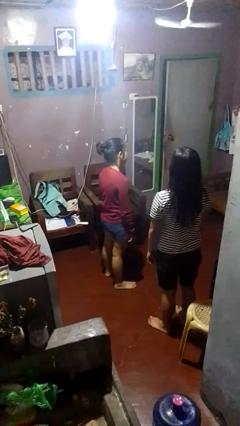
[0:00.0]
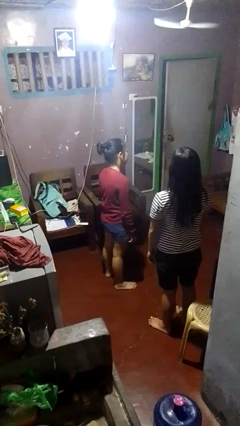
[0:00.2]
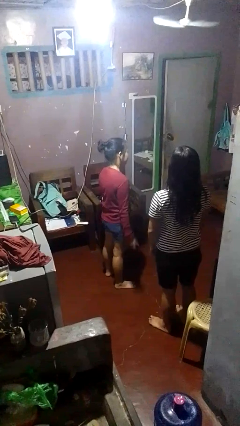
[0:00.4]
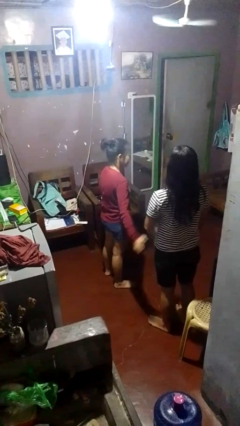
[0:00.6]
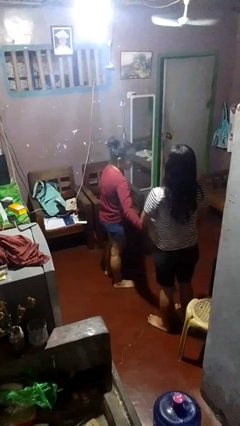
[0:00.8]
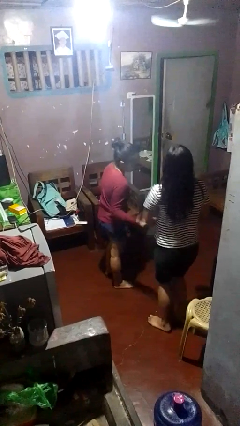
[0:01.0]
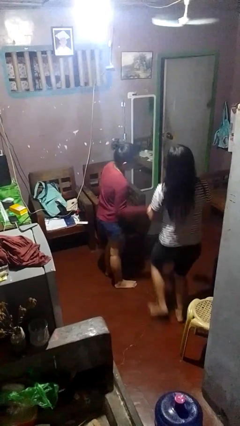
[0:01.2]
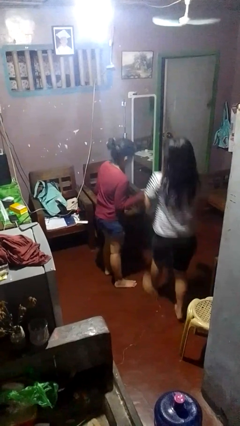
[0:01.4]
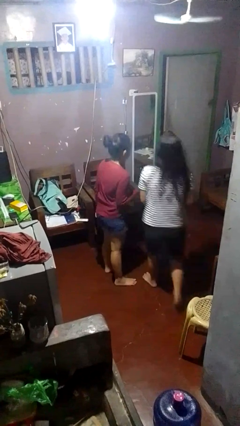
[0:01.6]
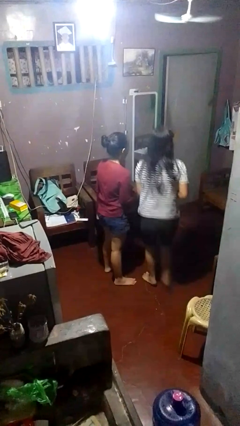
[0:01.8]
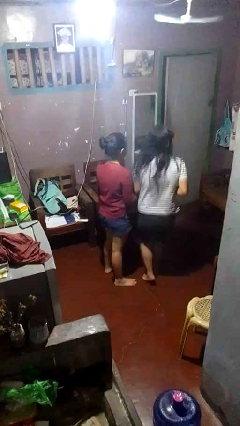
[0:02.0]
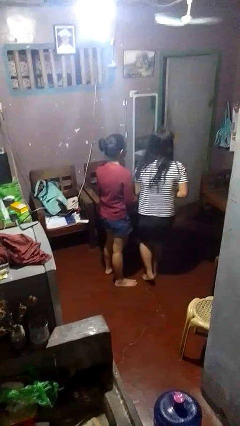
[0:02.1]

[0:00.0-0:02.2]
person grabs person by forearm

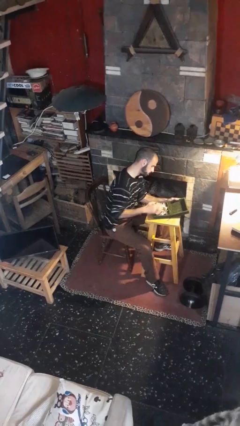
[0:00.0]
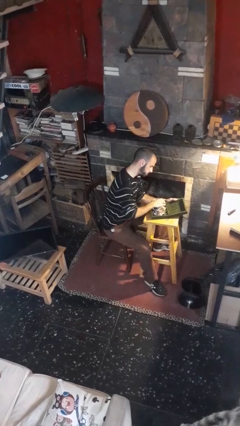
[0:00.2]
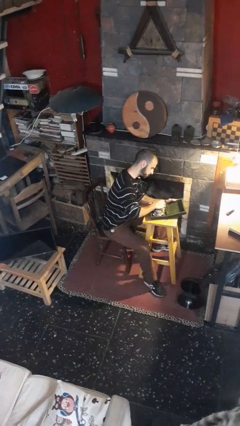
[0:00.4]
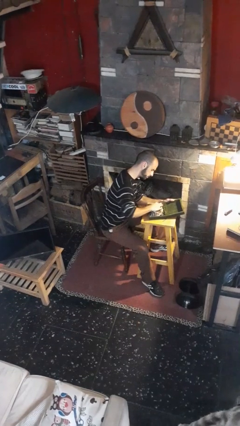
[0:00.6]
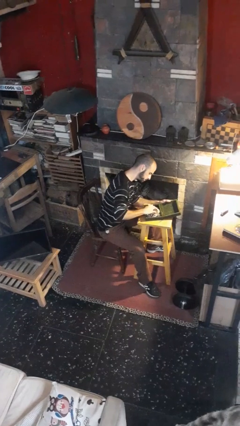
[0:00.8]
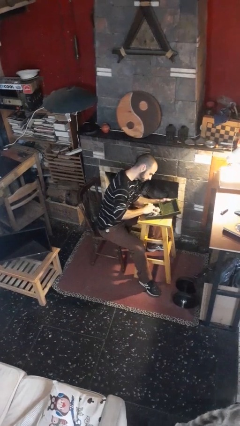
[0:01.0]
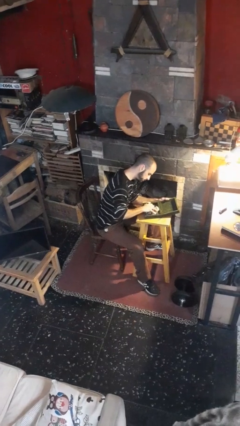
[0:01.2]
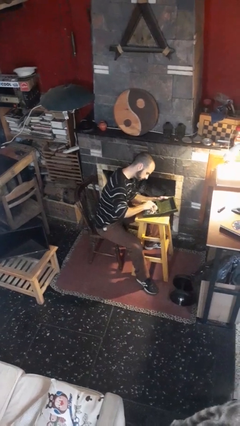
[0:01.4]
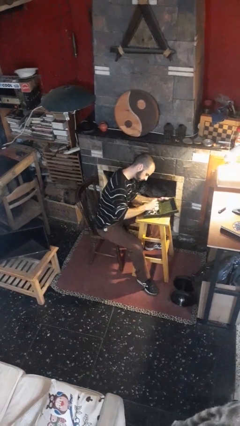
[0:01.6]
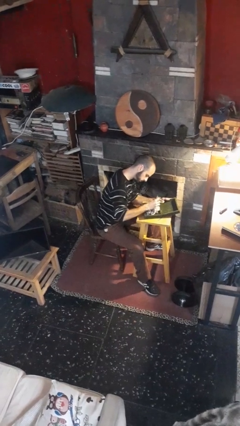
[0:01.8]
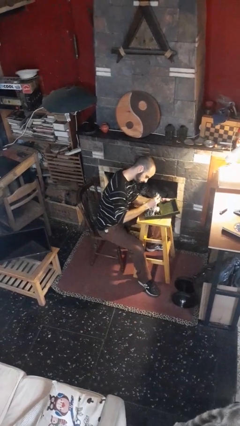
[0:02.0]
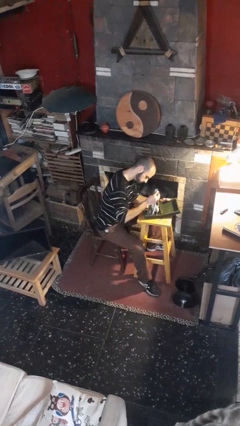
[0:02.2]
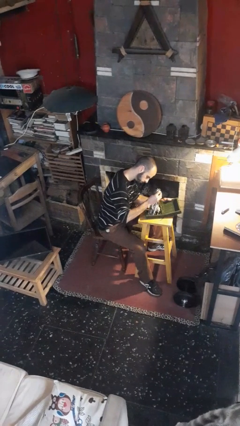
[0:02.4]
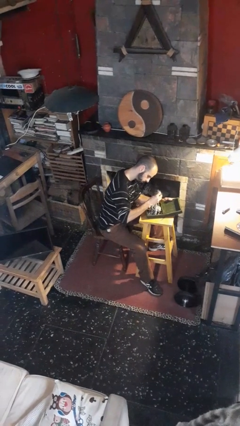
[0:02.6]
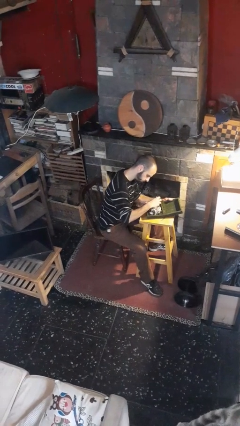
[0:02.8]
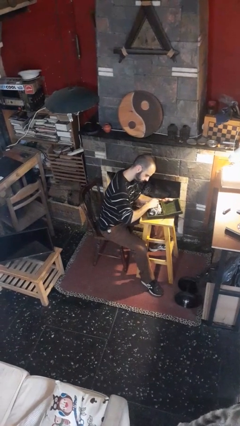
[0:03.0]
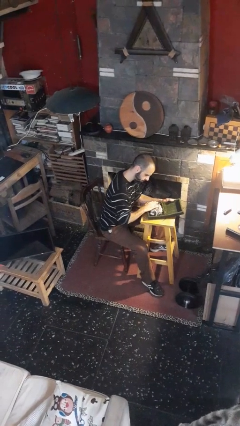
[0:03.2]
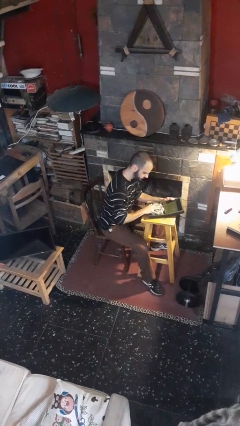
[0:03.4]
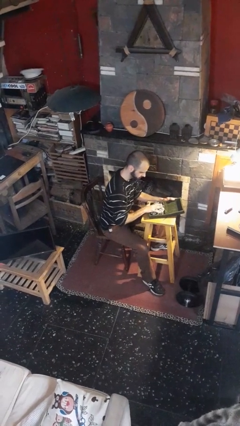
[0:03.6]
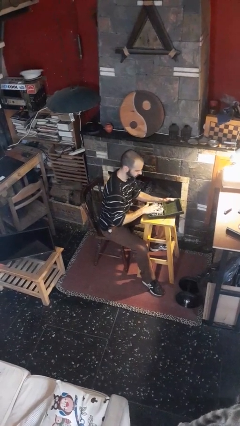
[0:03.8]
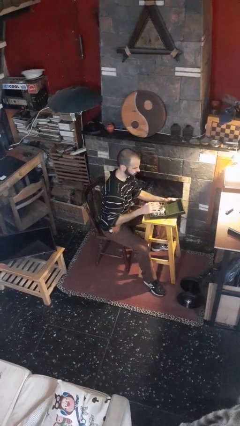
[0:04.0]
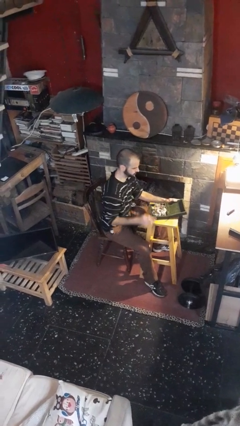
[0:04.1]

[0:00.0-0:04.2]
person searches jewelry box

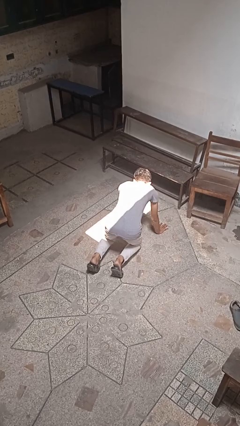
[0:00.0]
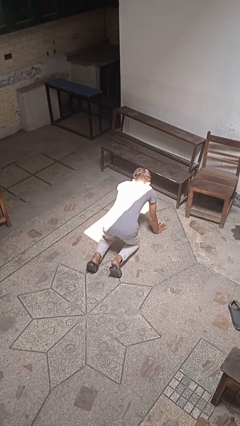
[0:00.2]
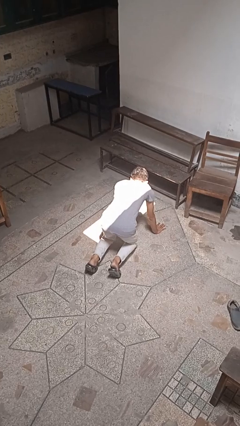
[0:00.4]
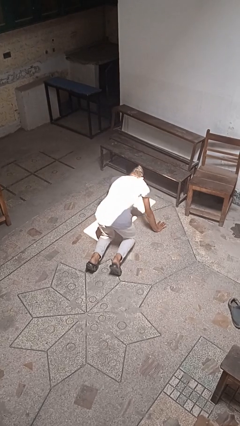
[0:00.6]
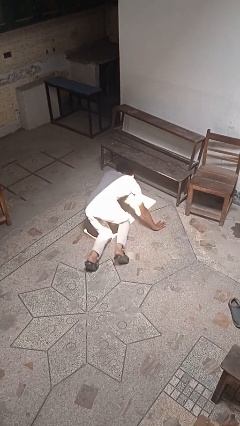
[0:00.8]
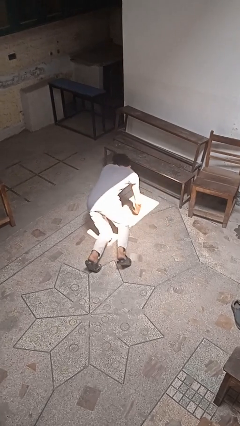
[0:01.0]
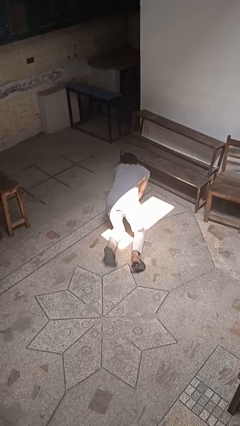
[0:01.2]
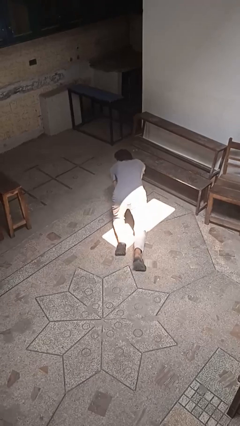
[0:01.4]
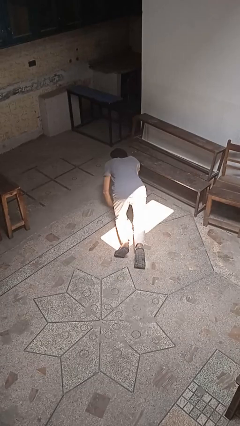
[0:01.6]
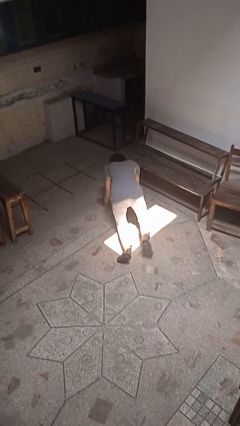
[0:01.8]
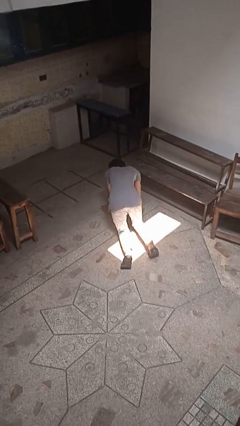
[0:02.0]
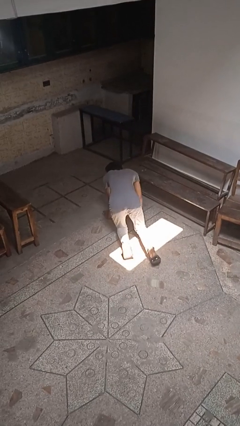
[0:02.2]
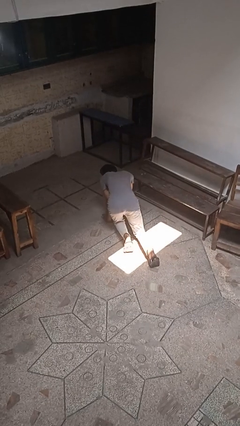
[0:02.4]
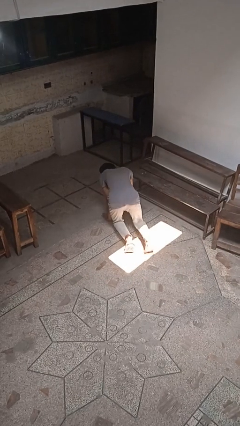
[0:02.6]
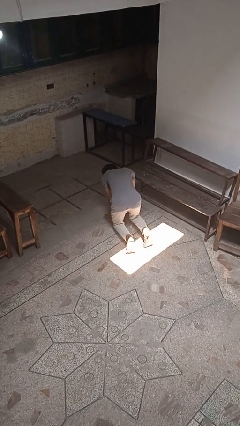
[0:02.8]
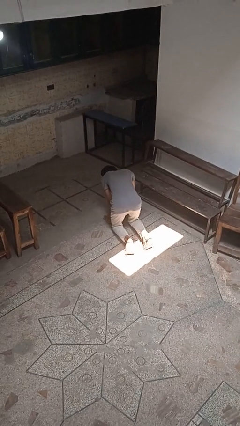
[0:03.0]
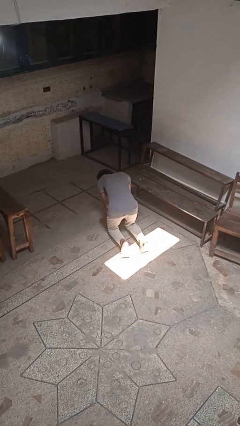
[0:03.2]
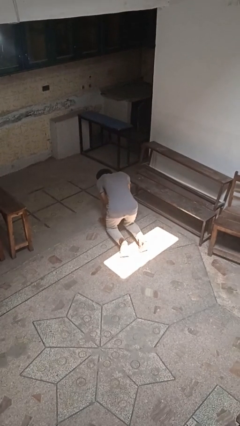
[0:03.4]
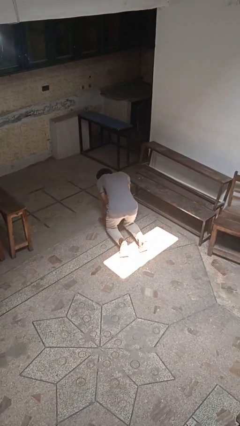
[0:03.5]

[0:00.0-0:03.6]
person crawls

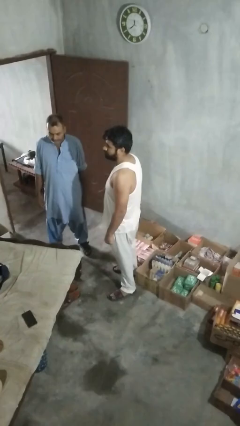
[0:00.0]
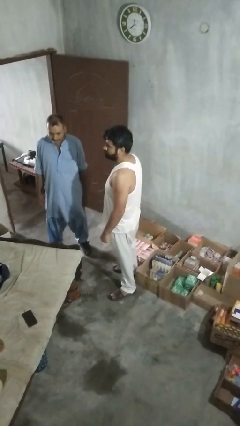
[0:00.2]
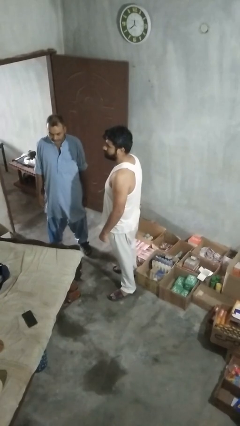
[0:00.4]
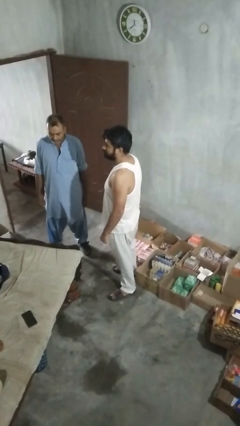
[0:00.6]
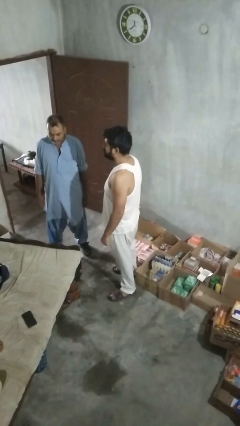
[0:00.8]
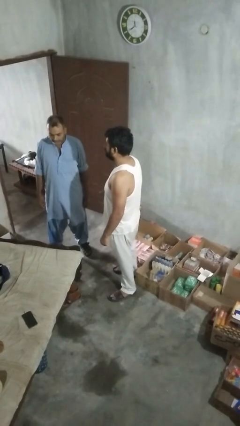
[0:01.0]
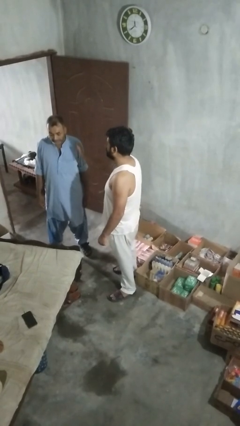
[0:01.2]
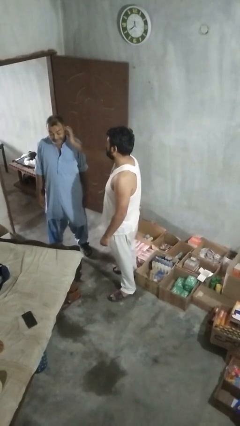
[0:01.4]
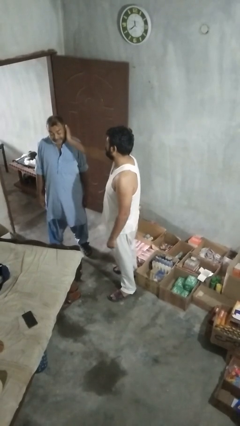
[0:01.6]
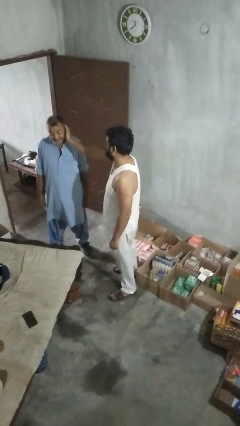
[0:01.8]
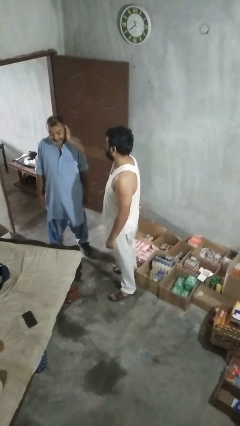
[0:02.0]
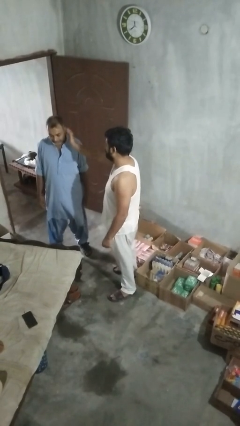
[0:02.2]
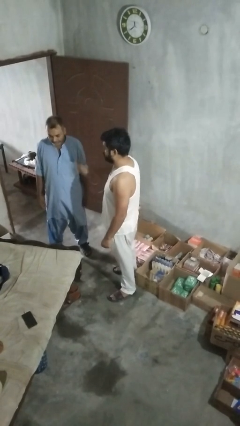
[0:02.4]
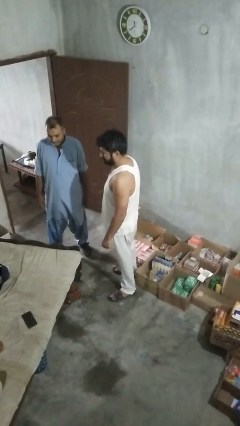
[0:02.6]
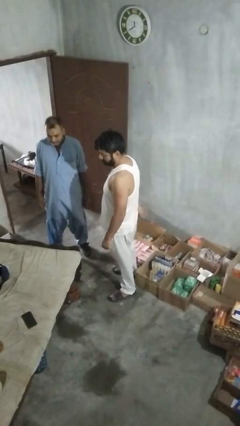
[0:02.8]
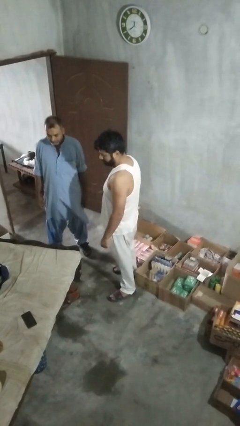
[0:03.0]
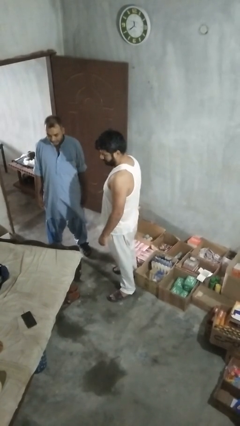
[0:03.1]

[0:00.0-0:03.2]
person touches face of person

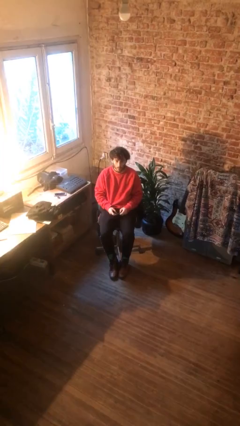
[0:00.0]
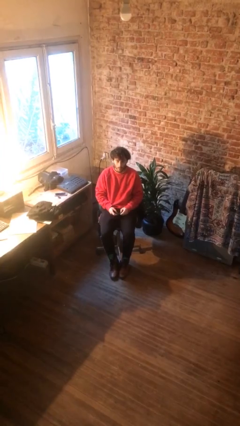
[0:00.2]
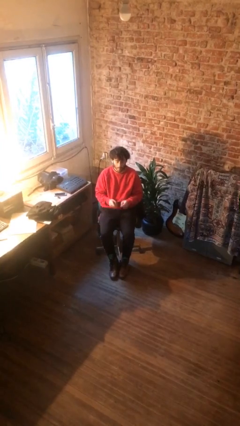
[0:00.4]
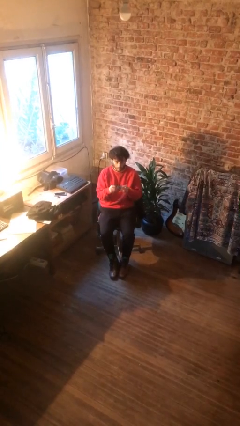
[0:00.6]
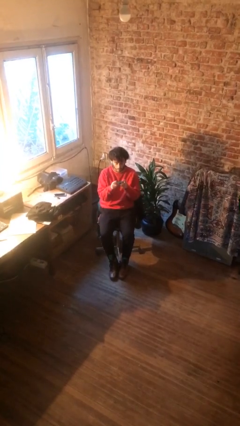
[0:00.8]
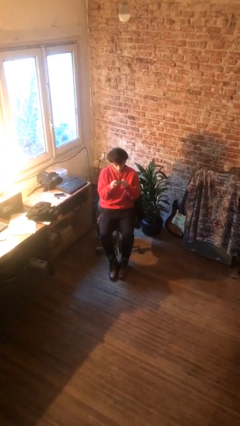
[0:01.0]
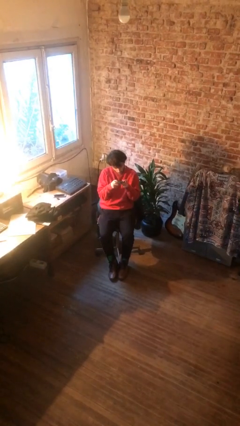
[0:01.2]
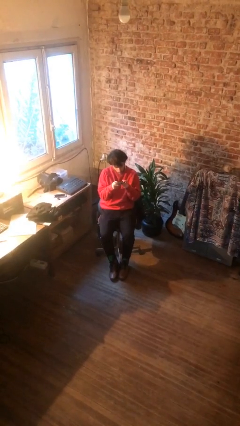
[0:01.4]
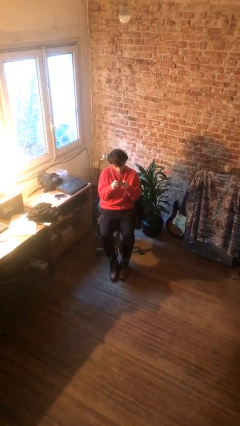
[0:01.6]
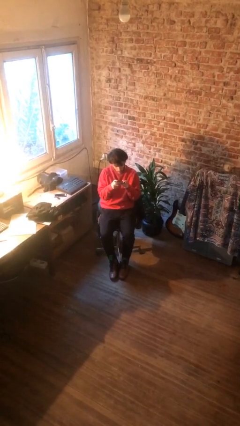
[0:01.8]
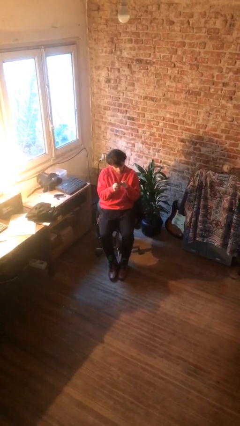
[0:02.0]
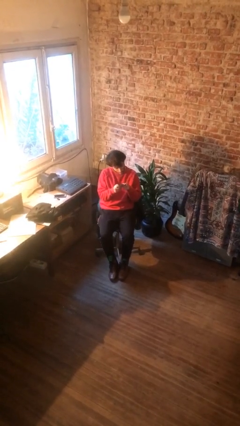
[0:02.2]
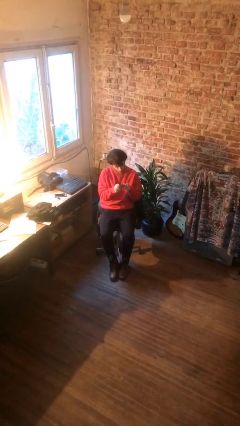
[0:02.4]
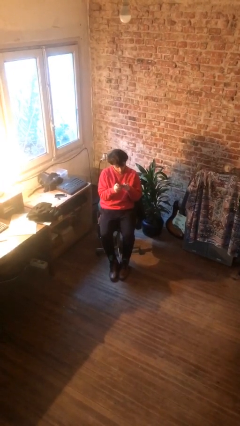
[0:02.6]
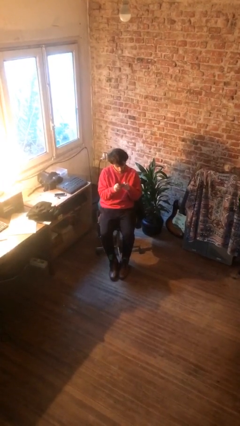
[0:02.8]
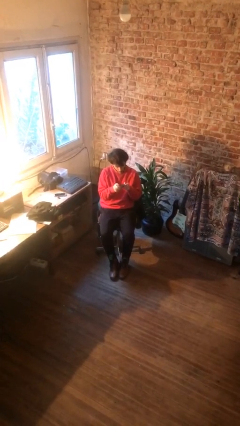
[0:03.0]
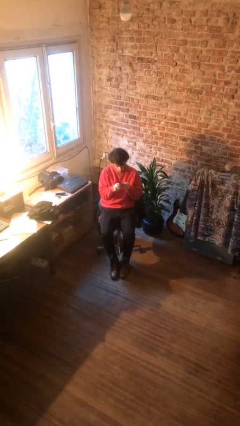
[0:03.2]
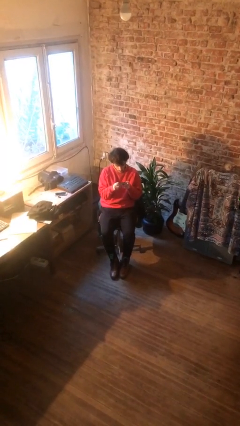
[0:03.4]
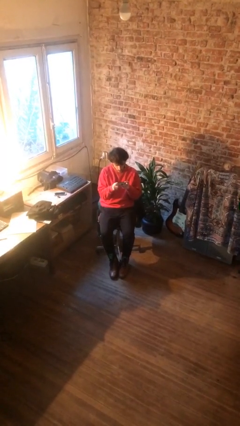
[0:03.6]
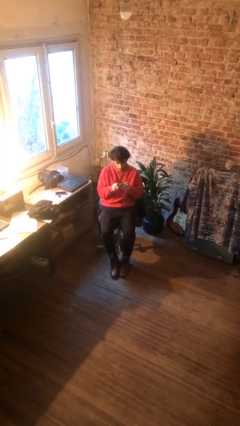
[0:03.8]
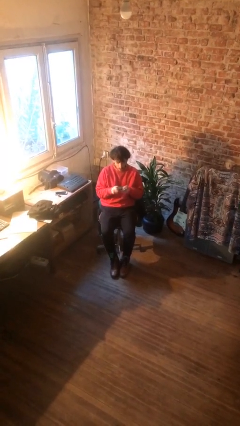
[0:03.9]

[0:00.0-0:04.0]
person interacts with handheld game

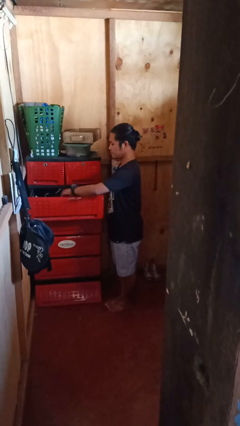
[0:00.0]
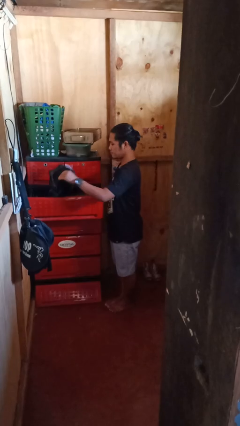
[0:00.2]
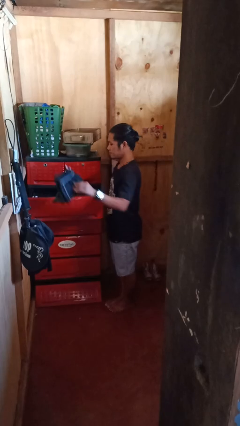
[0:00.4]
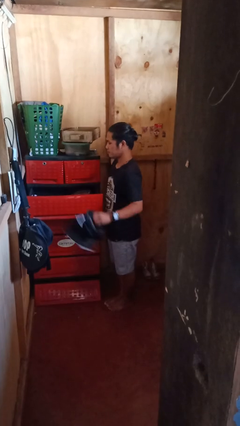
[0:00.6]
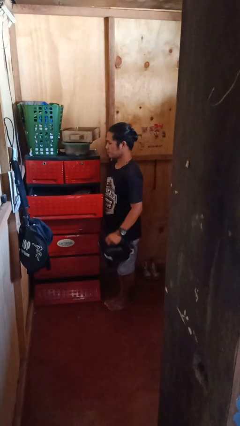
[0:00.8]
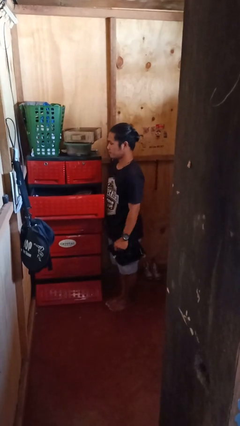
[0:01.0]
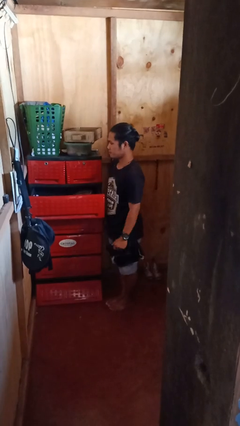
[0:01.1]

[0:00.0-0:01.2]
person takes clothes from dresser
